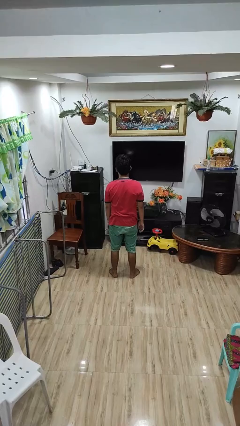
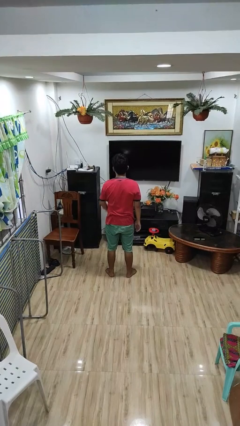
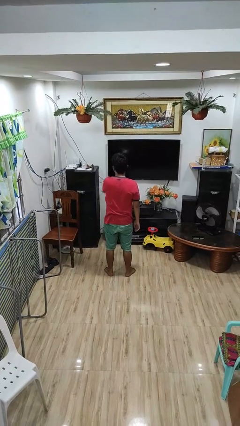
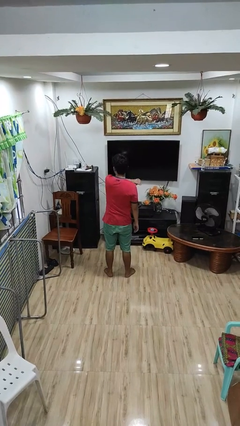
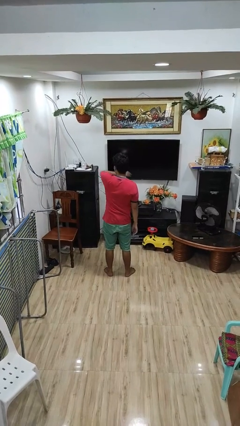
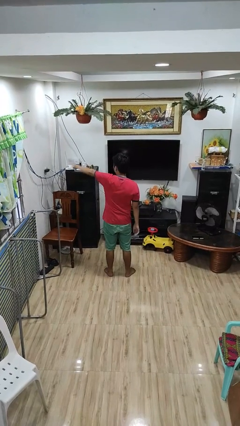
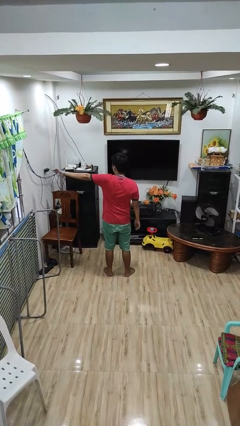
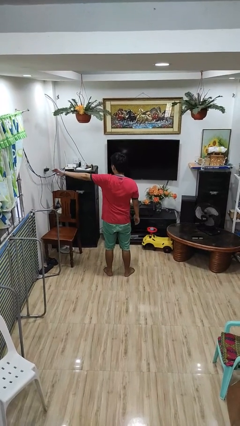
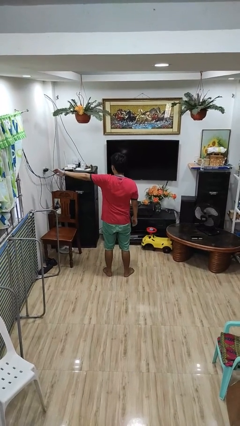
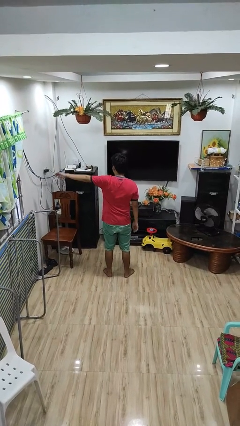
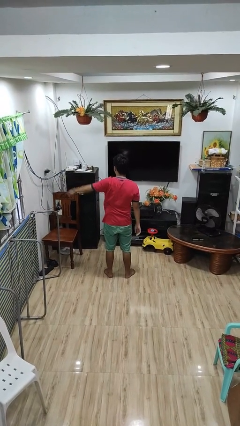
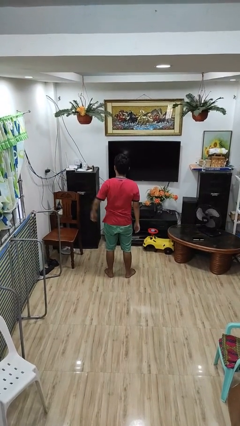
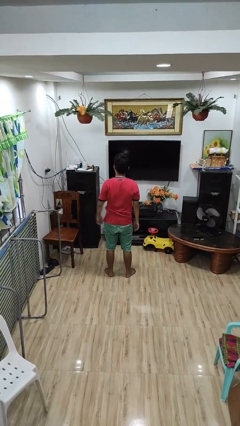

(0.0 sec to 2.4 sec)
person gestures swipe left

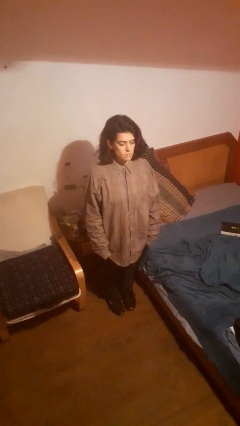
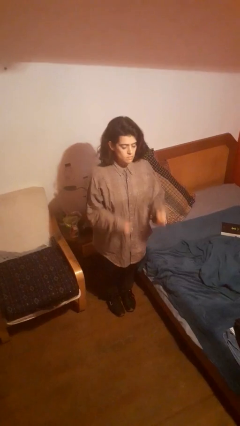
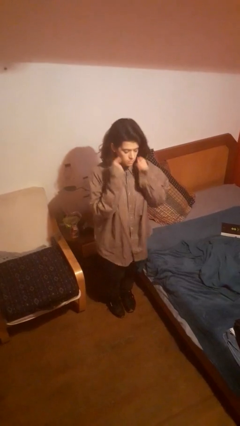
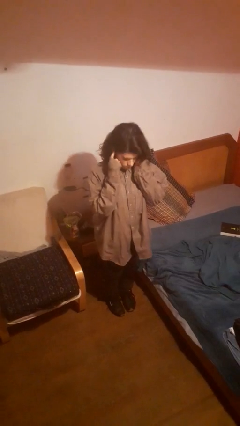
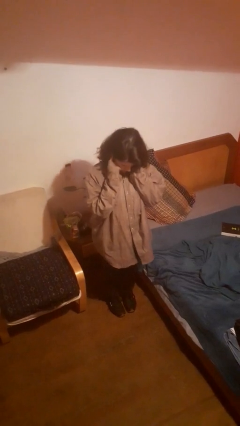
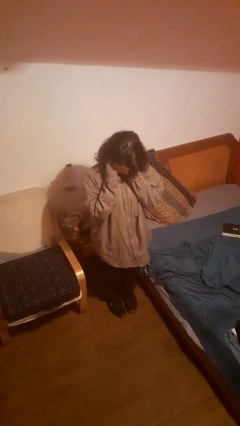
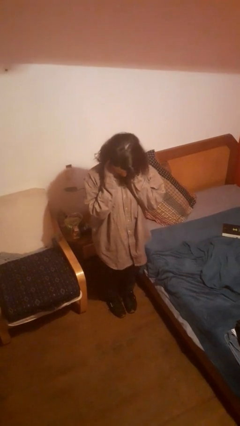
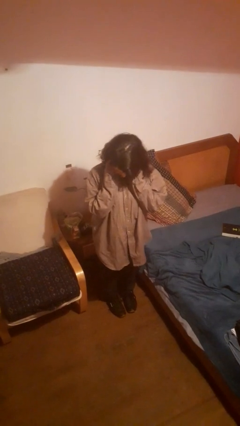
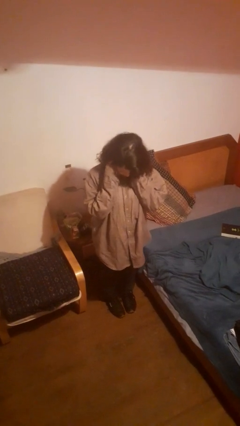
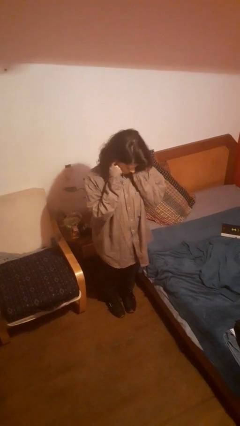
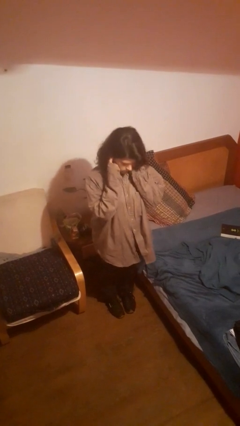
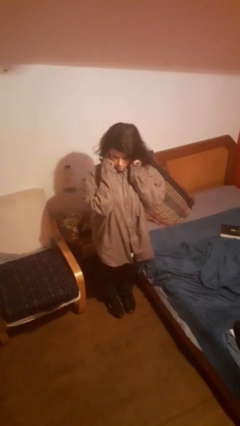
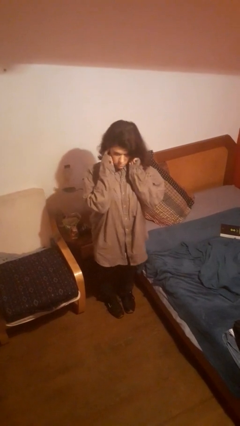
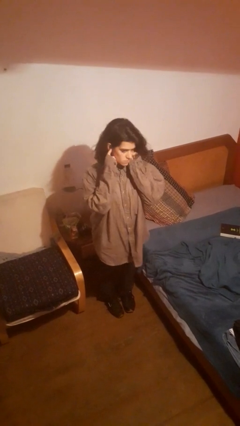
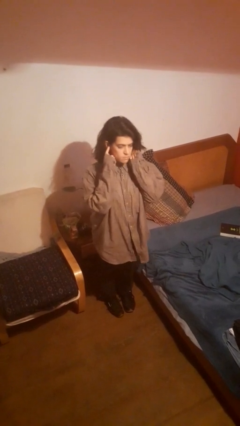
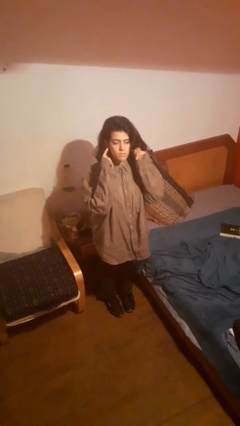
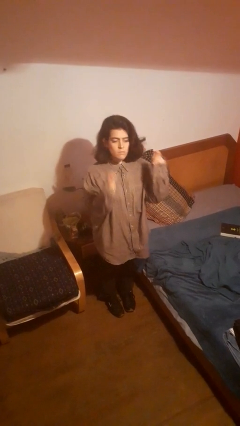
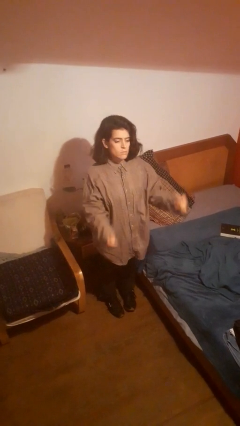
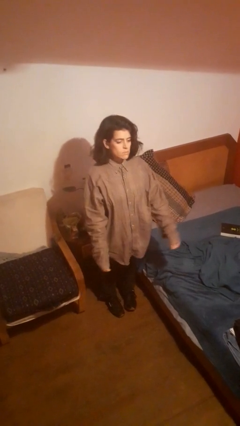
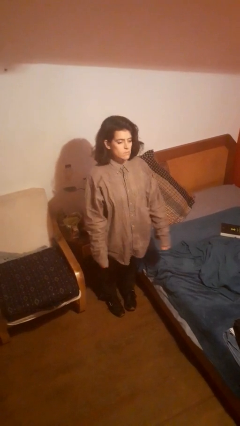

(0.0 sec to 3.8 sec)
person puts fingers in ear

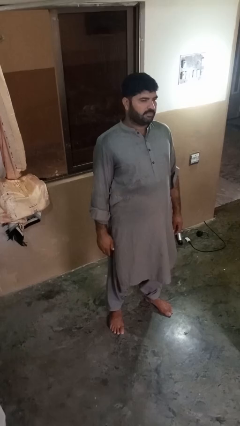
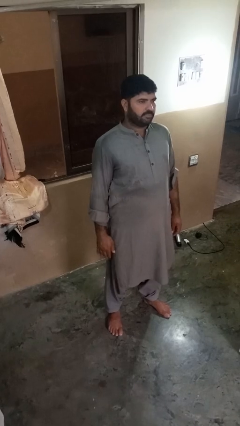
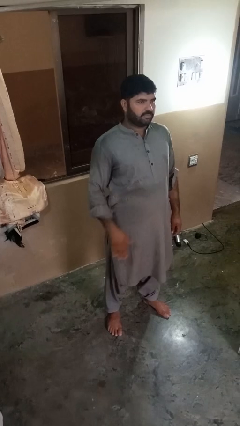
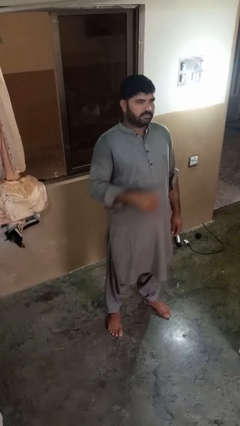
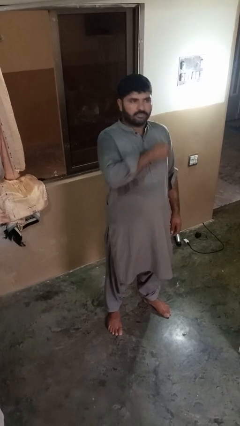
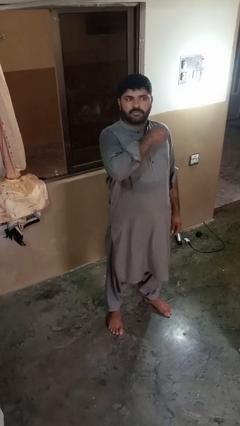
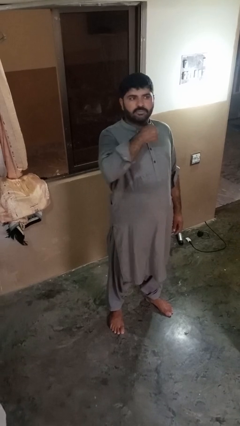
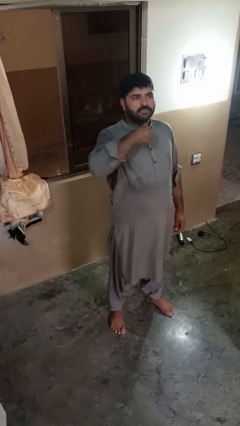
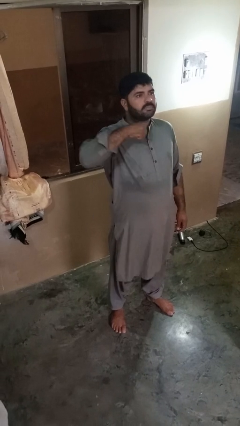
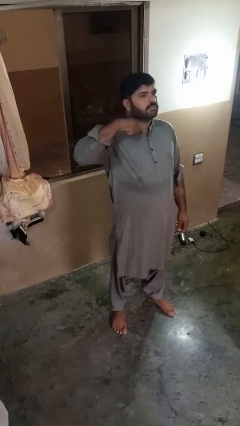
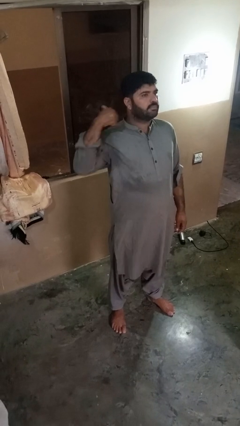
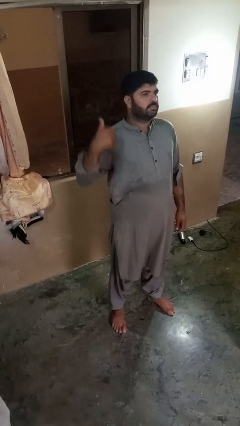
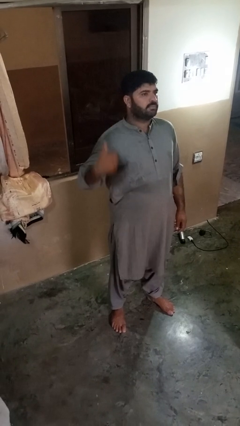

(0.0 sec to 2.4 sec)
person gestures cut

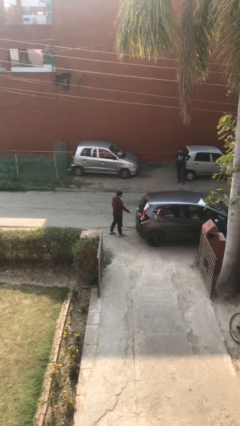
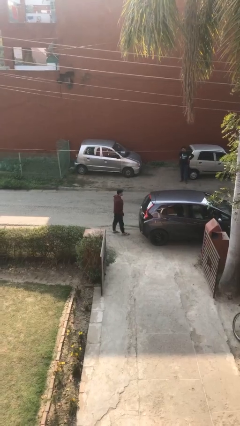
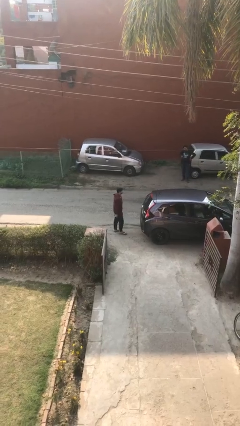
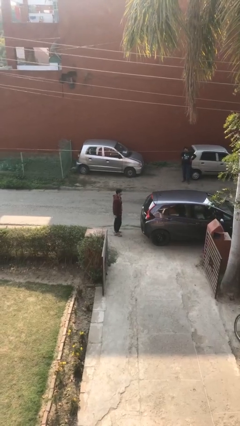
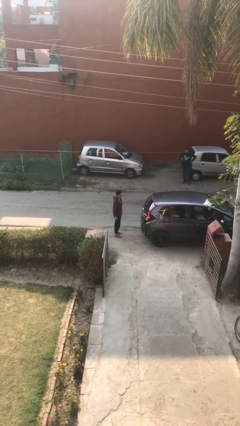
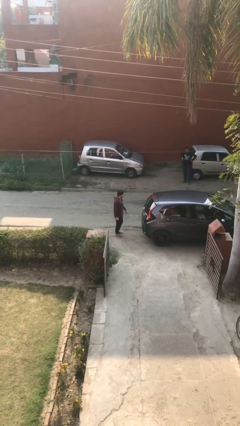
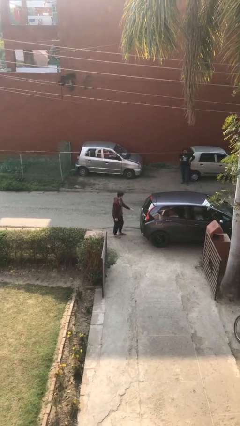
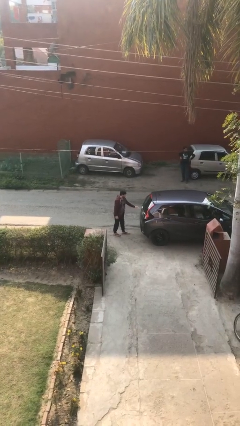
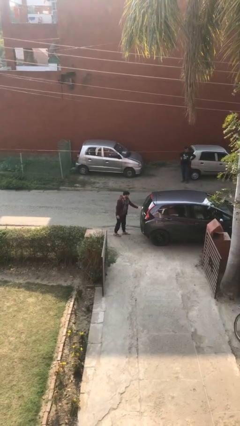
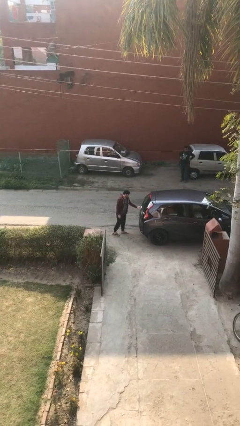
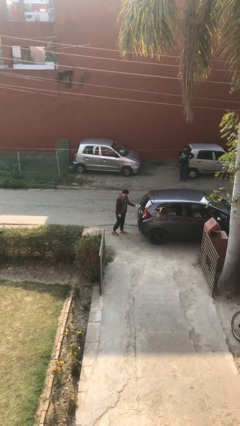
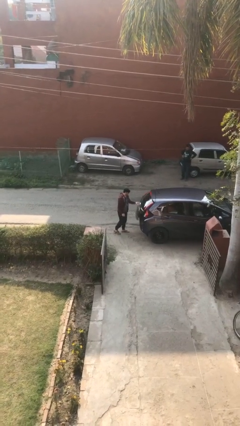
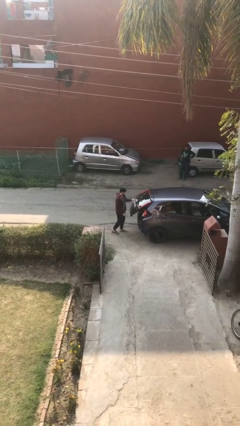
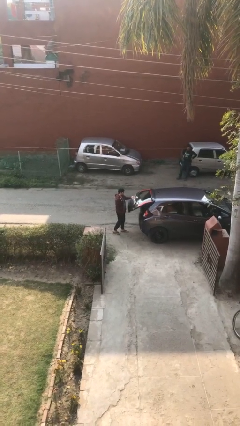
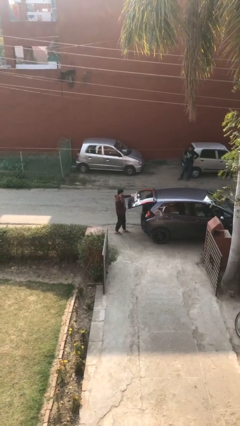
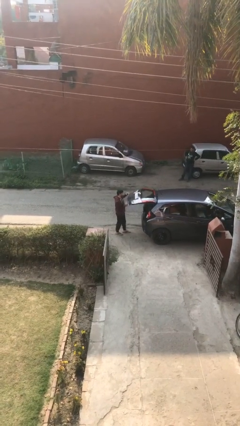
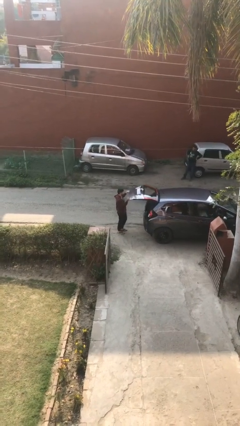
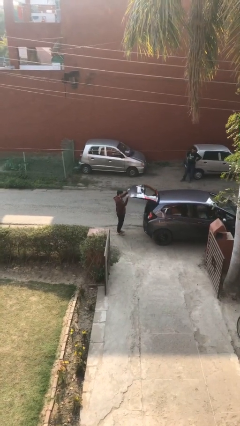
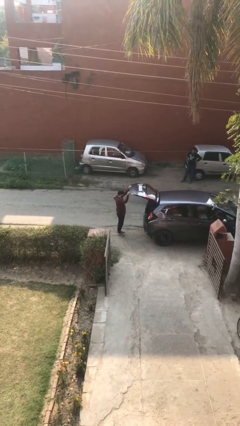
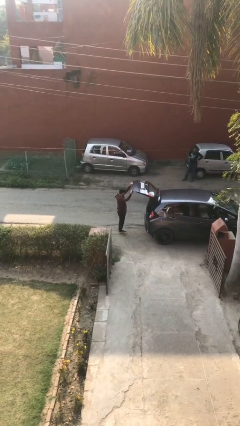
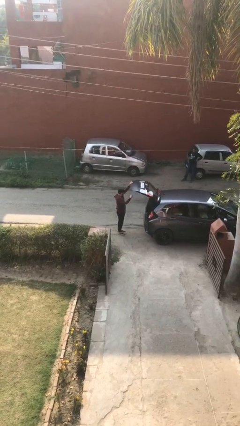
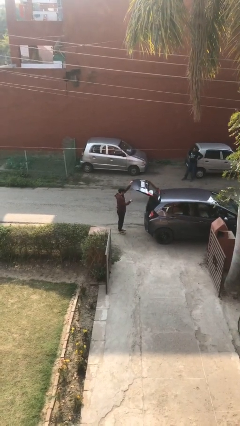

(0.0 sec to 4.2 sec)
person opens car trunk

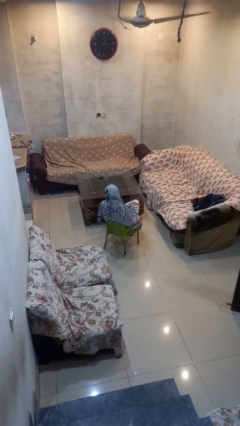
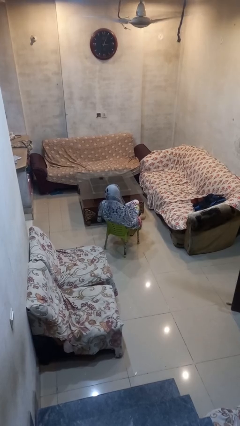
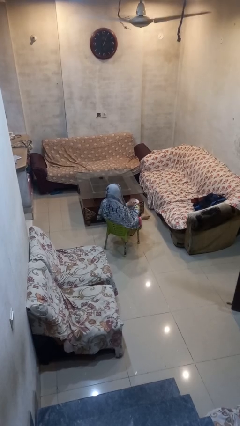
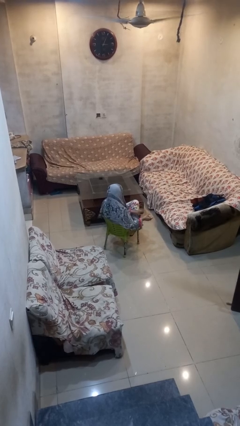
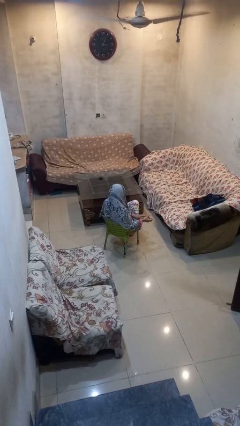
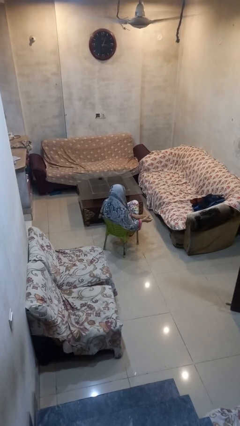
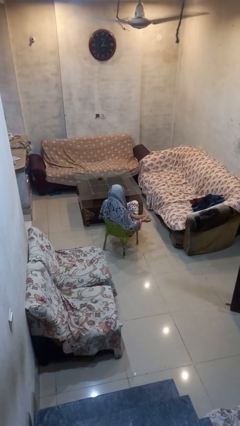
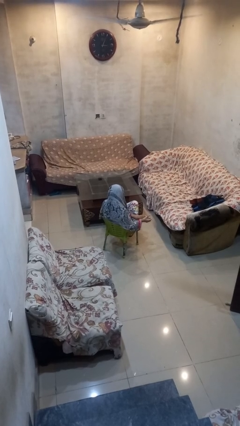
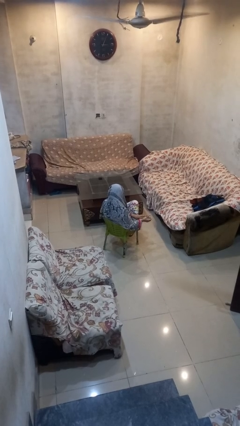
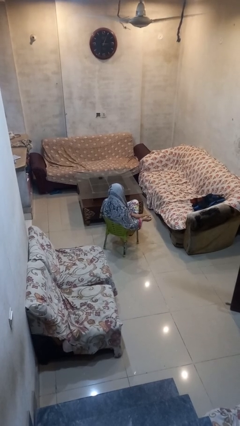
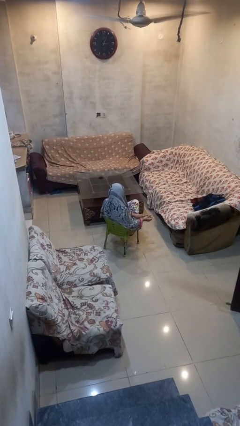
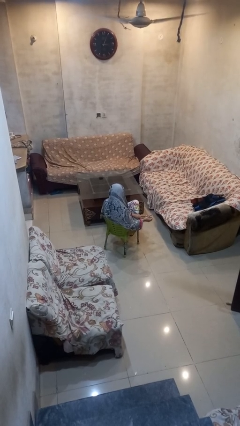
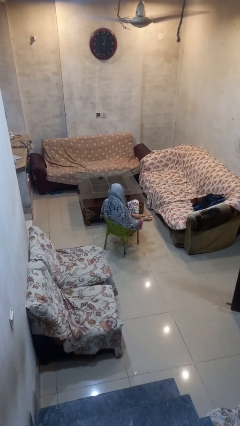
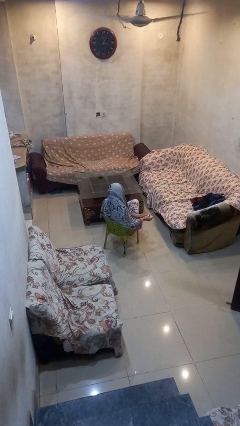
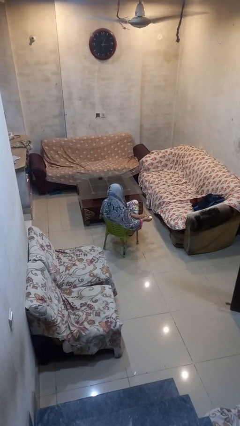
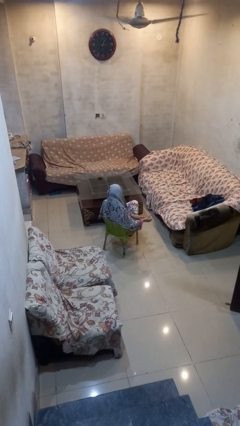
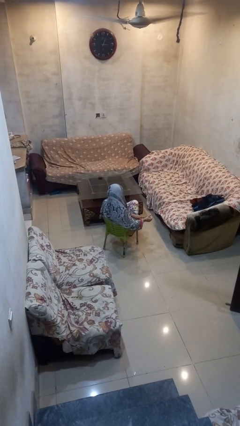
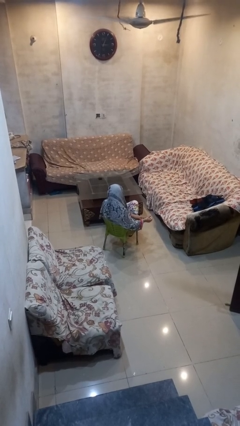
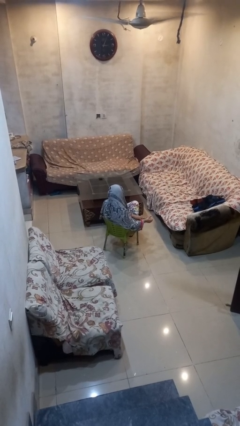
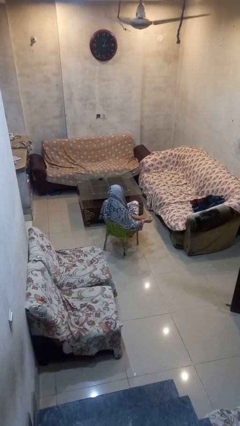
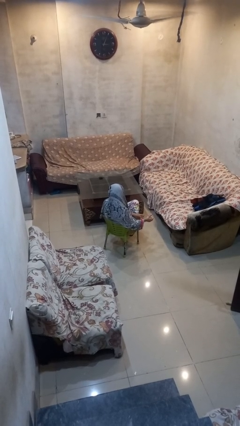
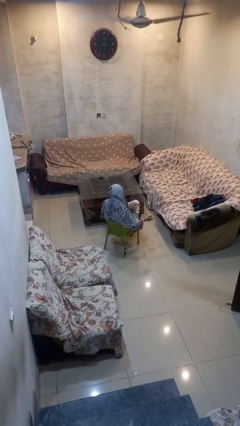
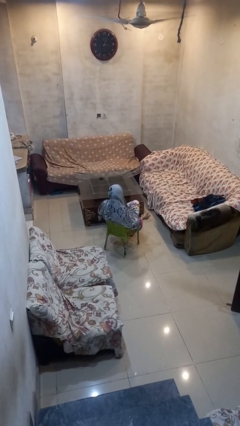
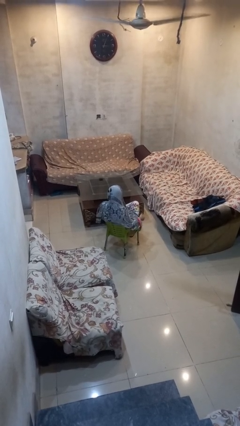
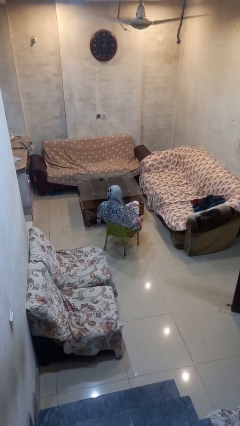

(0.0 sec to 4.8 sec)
person clips fingernails

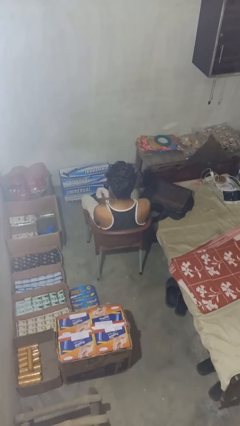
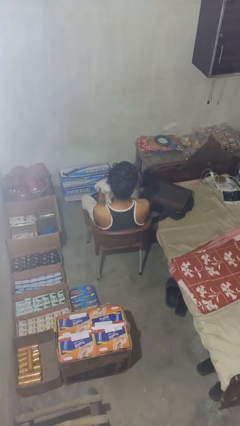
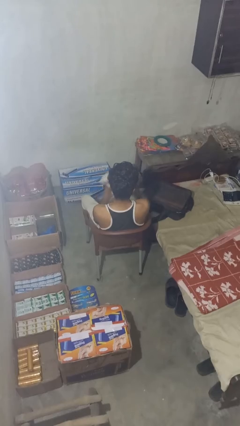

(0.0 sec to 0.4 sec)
person unloads clothes from suitcase
